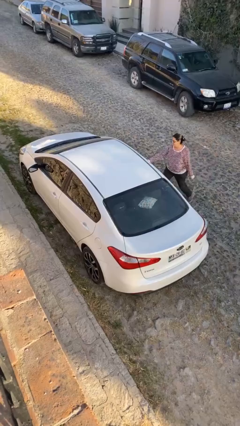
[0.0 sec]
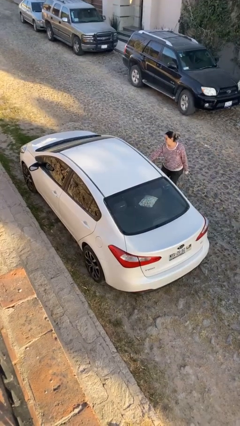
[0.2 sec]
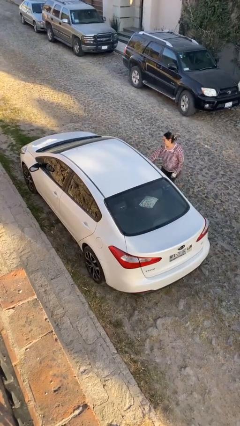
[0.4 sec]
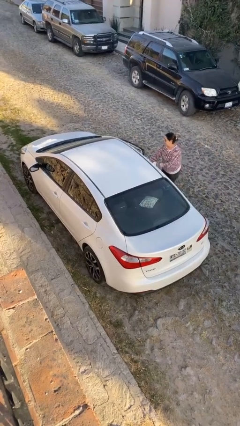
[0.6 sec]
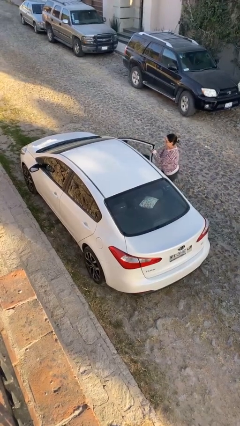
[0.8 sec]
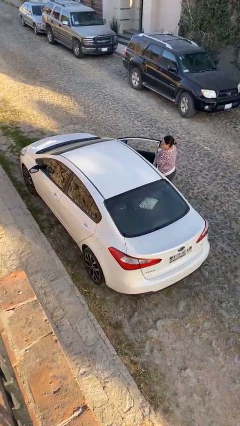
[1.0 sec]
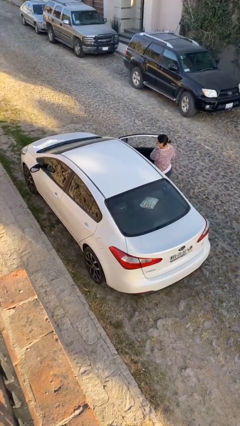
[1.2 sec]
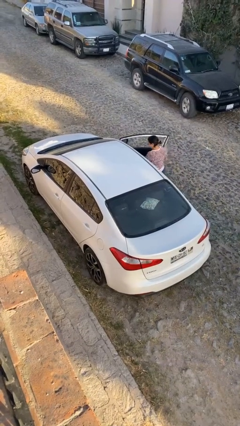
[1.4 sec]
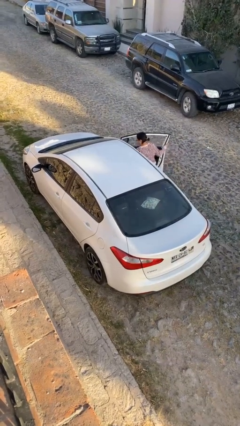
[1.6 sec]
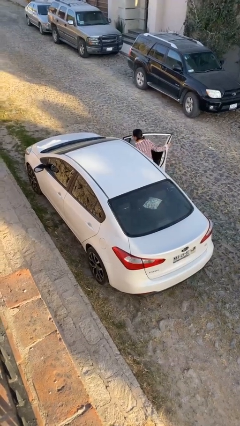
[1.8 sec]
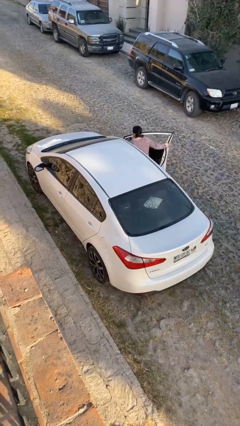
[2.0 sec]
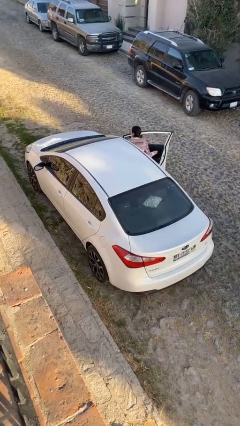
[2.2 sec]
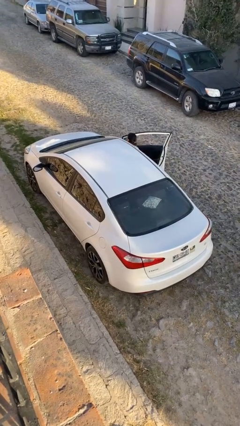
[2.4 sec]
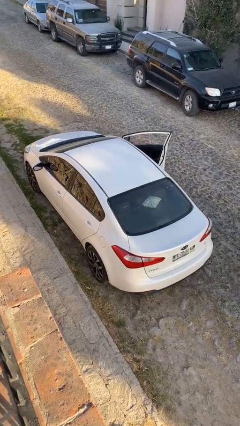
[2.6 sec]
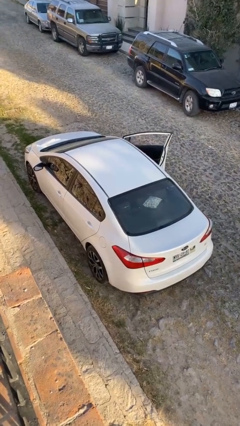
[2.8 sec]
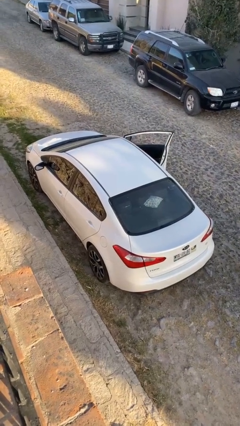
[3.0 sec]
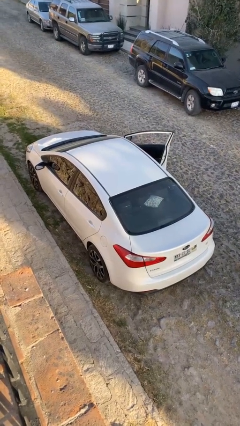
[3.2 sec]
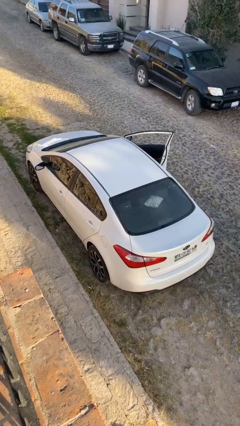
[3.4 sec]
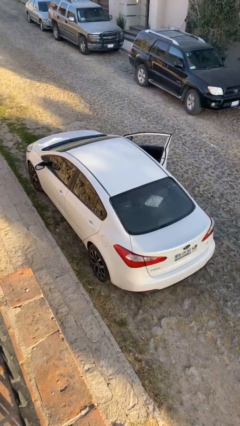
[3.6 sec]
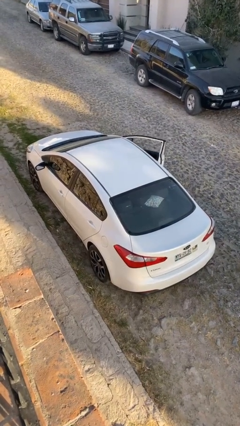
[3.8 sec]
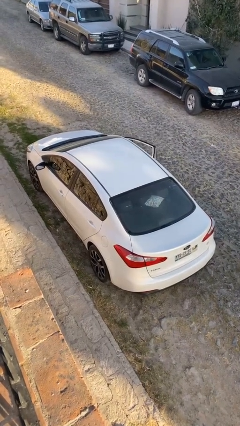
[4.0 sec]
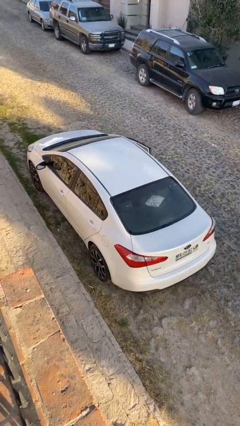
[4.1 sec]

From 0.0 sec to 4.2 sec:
car picks up person

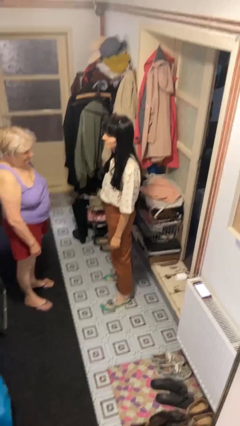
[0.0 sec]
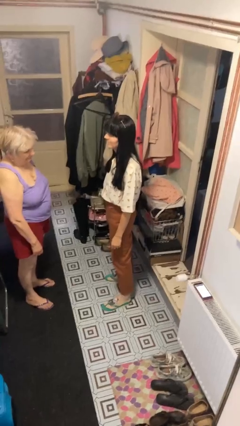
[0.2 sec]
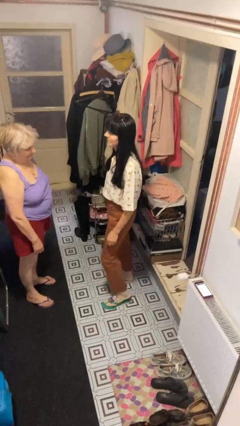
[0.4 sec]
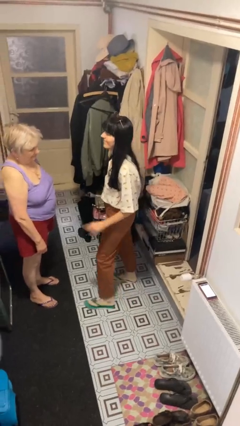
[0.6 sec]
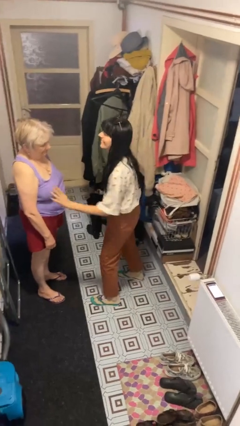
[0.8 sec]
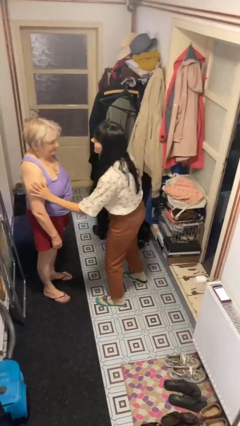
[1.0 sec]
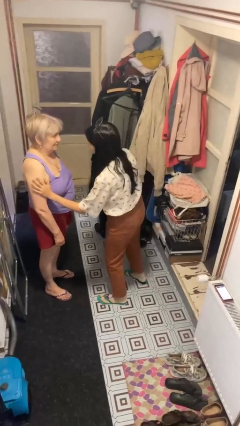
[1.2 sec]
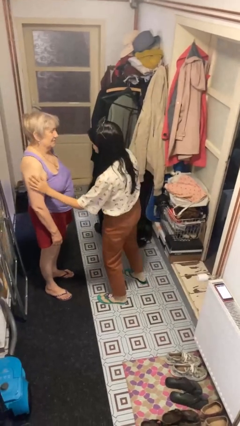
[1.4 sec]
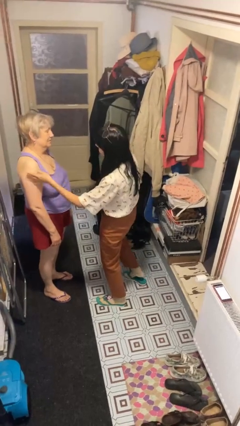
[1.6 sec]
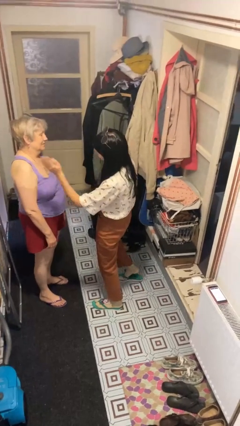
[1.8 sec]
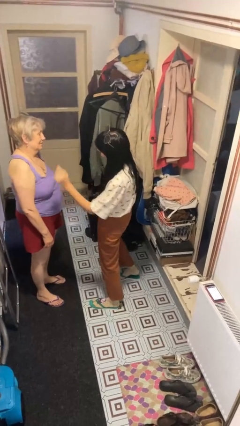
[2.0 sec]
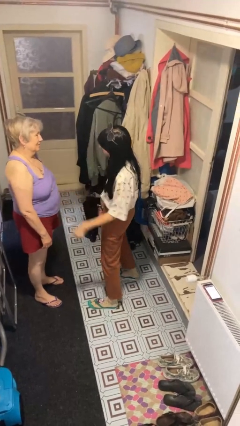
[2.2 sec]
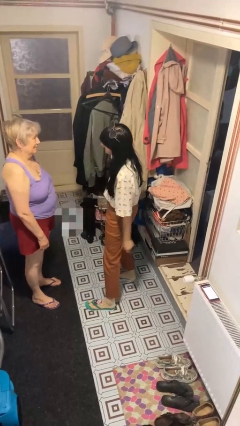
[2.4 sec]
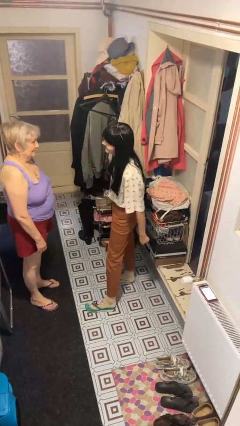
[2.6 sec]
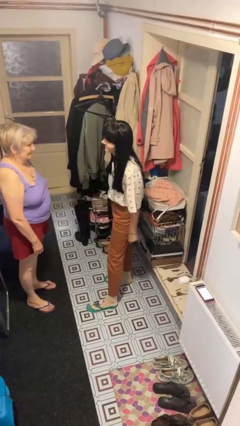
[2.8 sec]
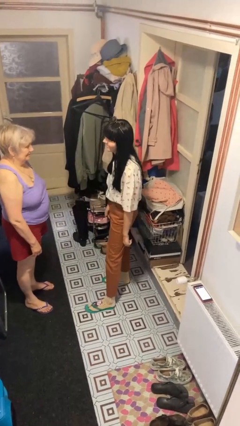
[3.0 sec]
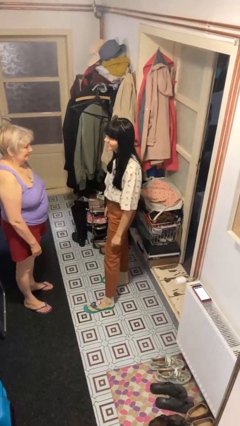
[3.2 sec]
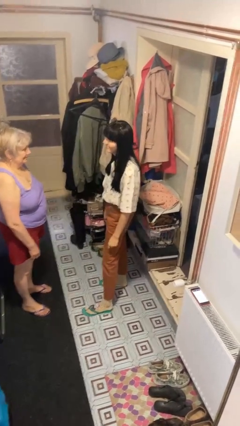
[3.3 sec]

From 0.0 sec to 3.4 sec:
person shoves person

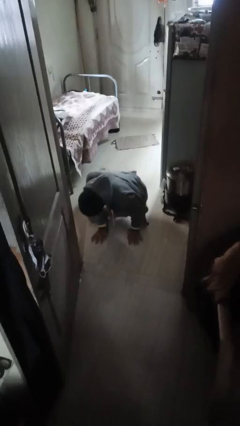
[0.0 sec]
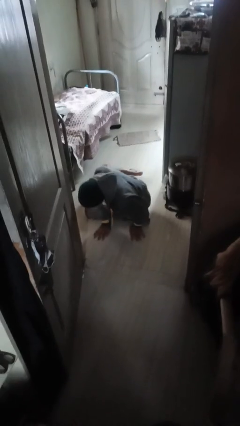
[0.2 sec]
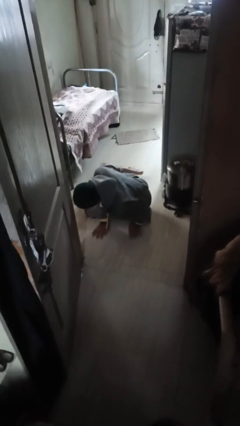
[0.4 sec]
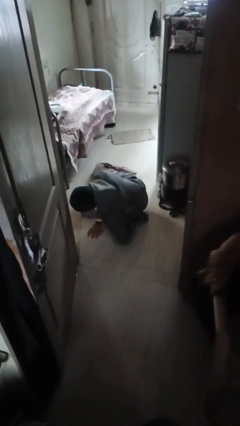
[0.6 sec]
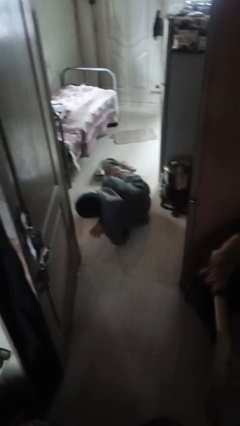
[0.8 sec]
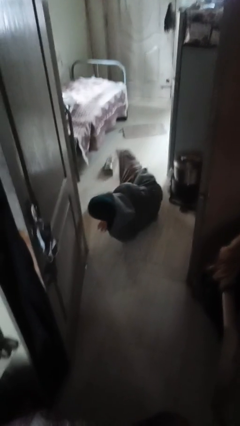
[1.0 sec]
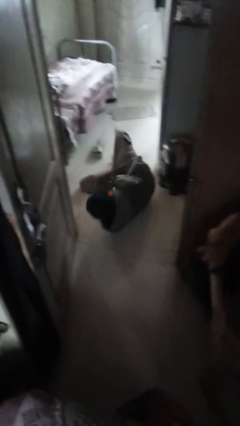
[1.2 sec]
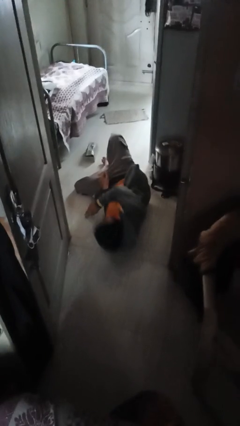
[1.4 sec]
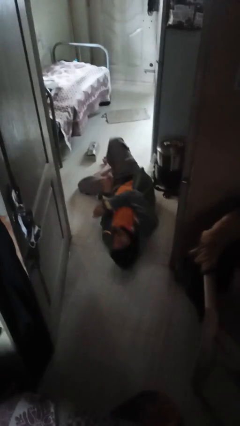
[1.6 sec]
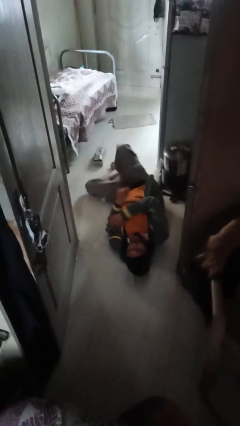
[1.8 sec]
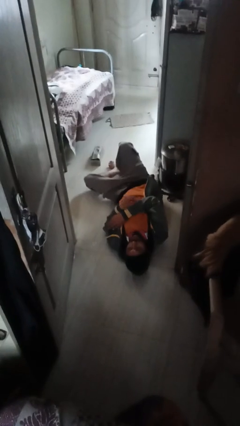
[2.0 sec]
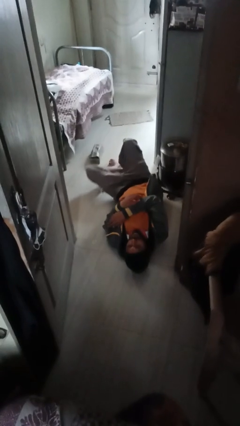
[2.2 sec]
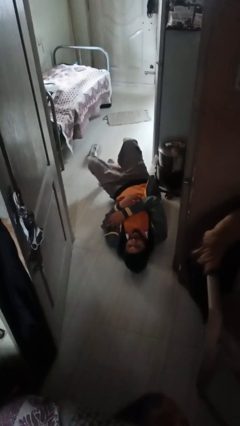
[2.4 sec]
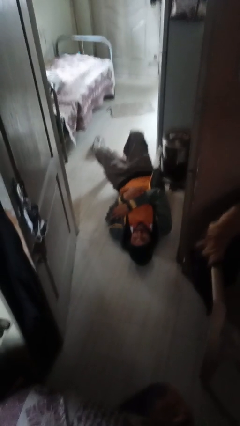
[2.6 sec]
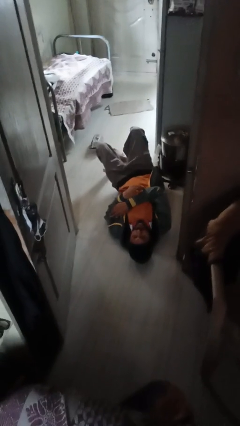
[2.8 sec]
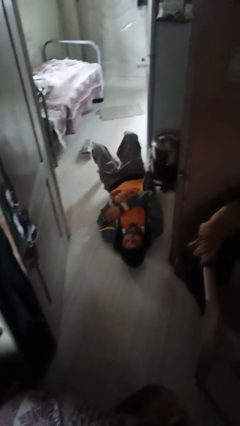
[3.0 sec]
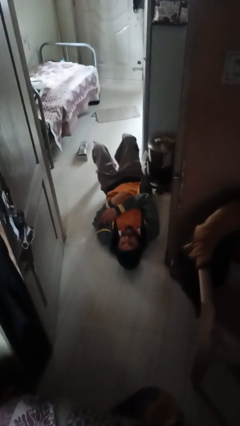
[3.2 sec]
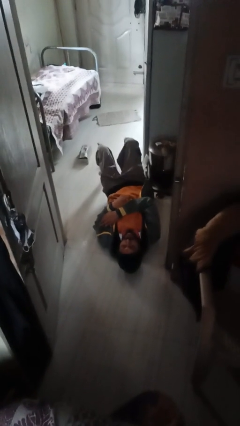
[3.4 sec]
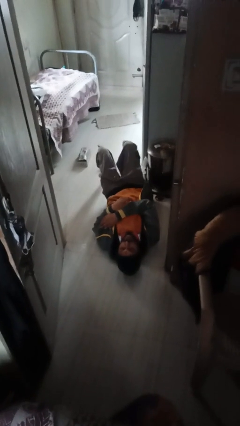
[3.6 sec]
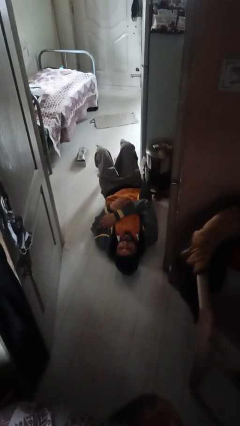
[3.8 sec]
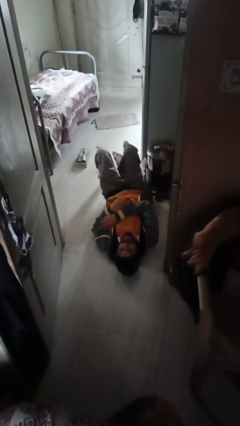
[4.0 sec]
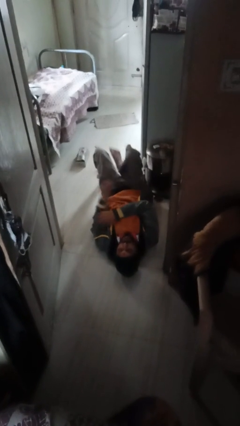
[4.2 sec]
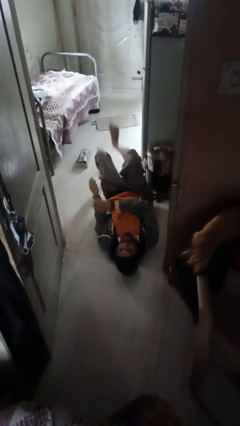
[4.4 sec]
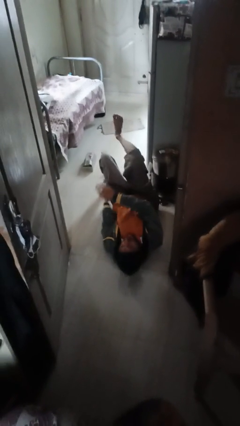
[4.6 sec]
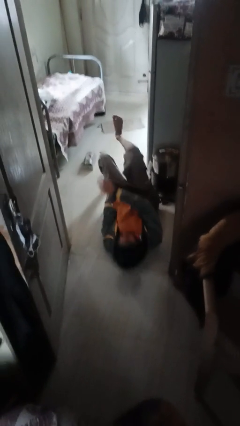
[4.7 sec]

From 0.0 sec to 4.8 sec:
person lies down on floor

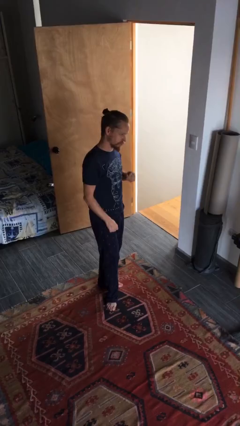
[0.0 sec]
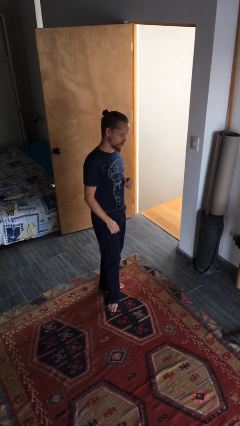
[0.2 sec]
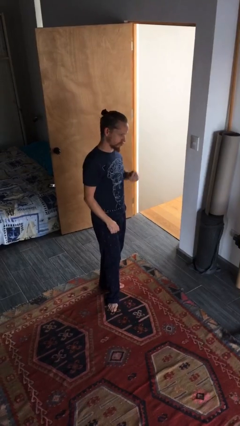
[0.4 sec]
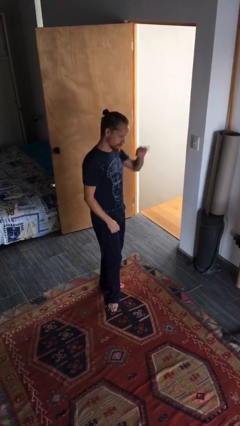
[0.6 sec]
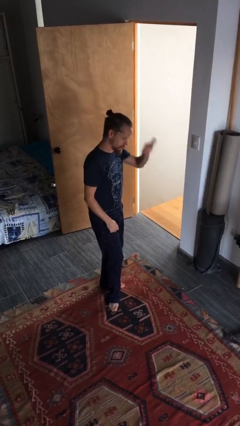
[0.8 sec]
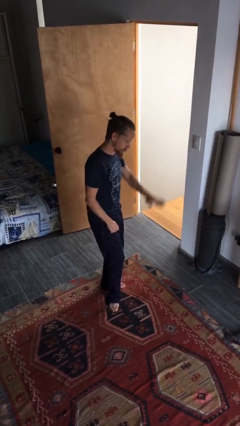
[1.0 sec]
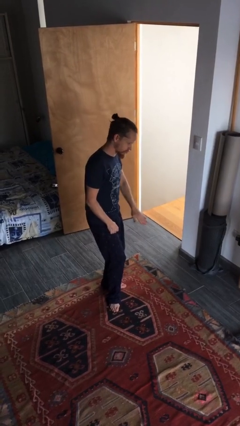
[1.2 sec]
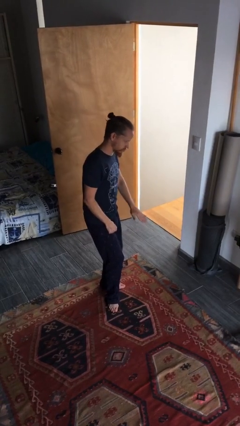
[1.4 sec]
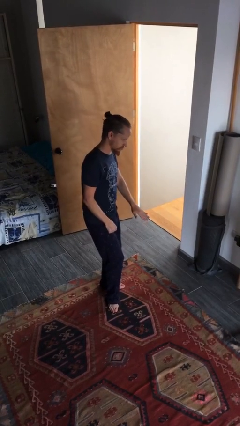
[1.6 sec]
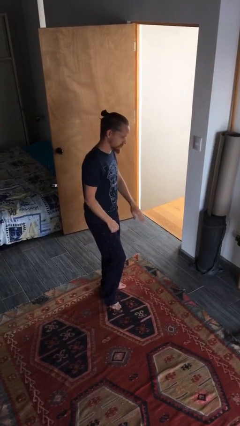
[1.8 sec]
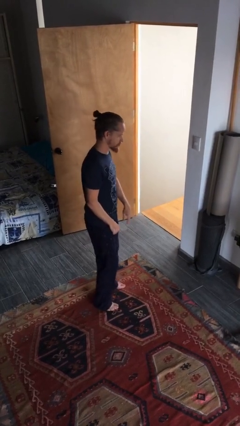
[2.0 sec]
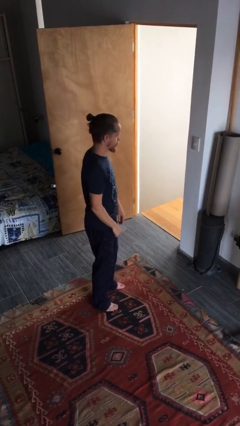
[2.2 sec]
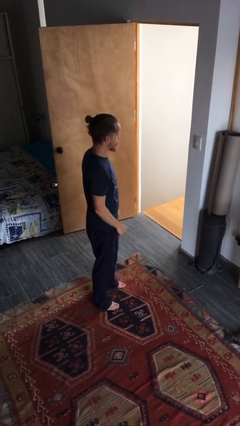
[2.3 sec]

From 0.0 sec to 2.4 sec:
person gestures swipe down

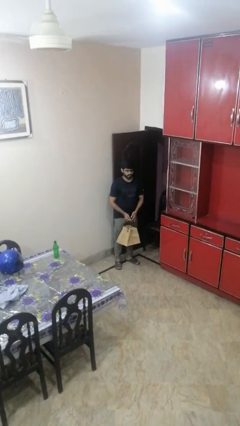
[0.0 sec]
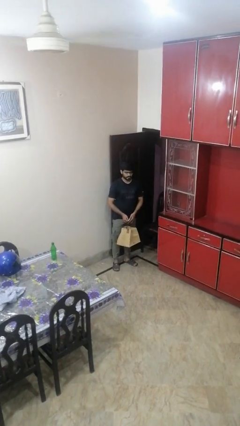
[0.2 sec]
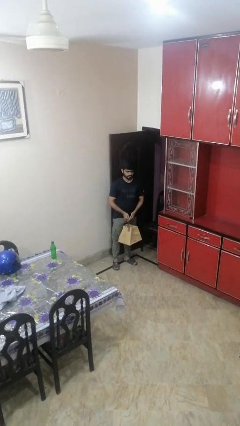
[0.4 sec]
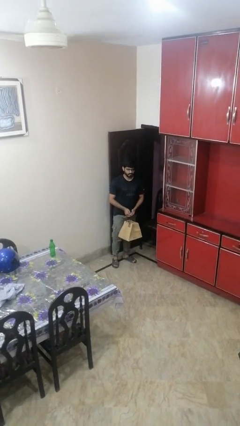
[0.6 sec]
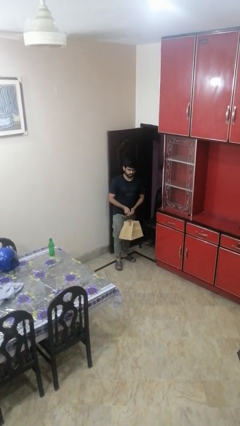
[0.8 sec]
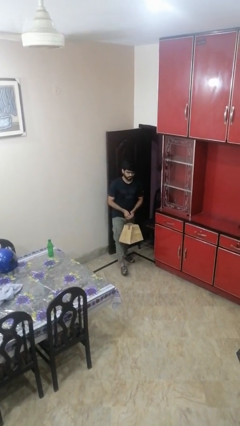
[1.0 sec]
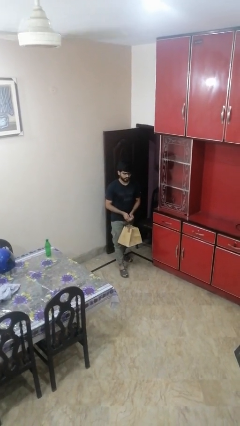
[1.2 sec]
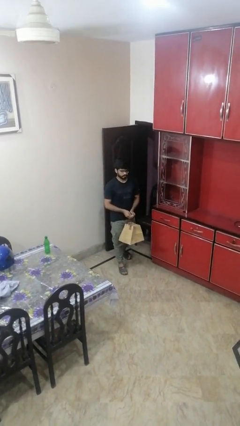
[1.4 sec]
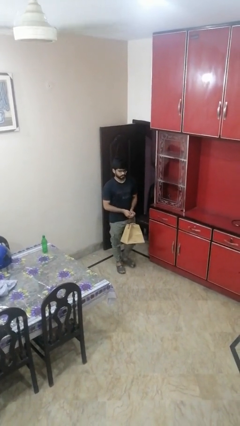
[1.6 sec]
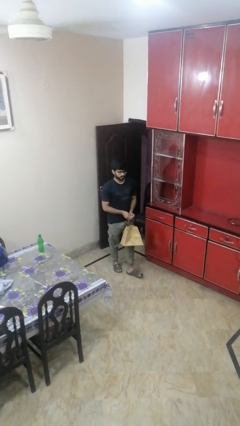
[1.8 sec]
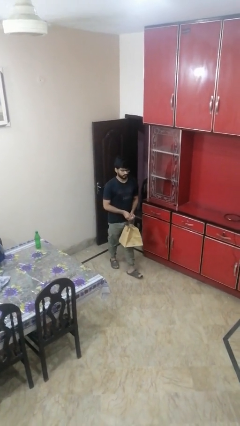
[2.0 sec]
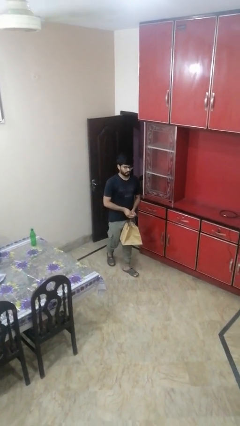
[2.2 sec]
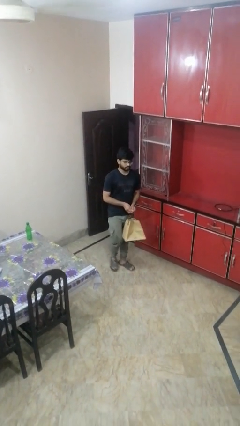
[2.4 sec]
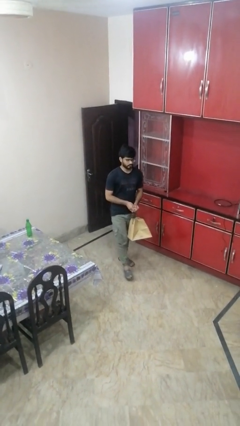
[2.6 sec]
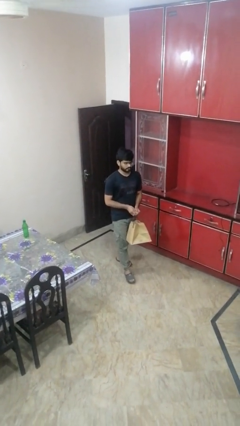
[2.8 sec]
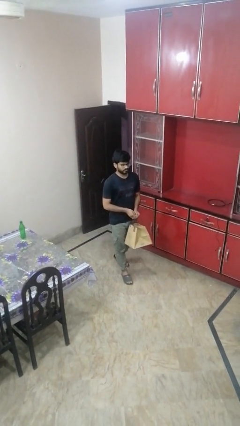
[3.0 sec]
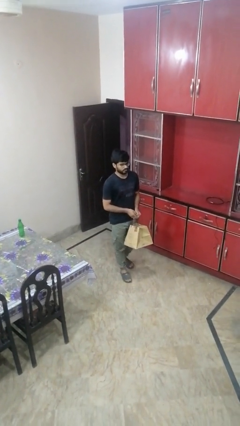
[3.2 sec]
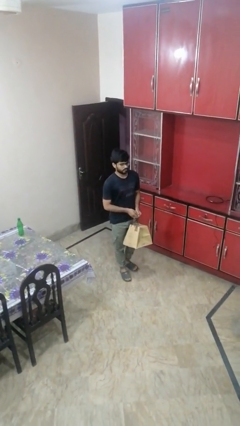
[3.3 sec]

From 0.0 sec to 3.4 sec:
person carries groceries
